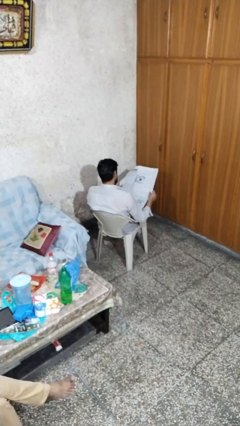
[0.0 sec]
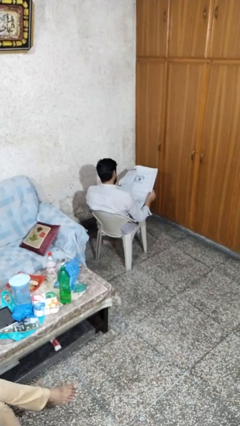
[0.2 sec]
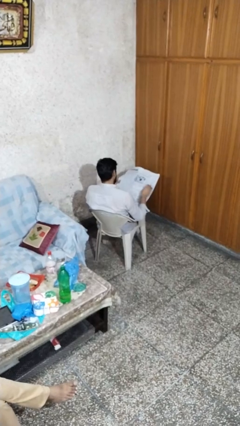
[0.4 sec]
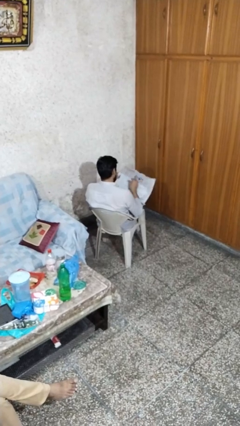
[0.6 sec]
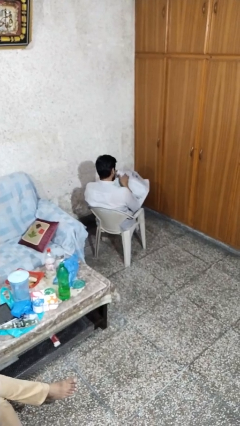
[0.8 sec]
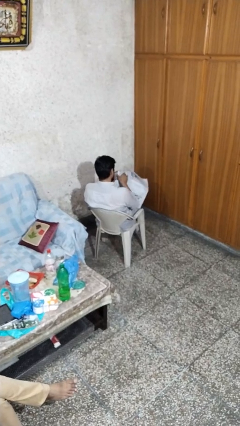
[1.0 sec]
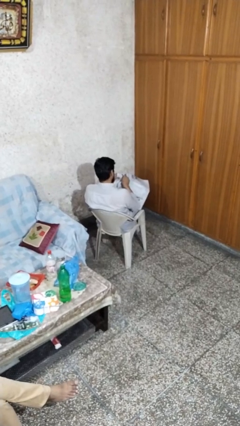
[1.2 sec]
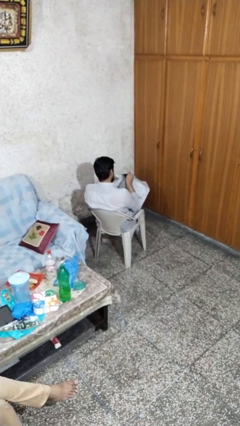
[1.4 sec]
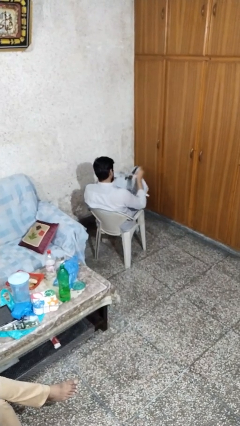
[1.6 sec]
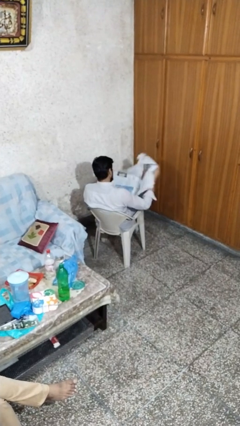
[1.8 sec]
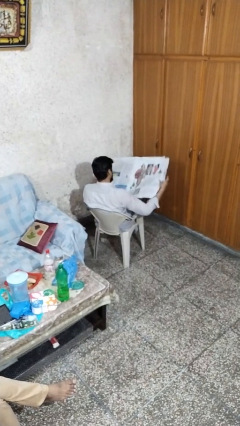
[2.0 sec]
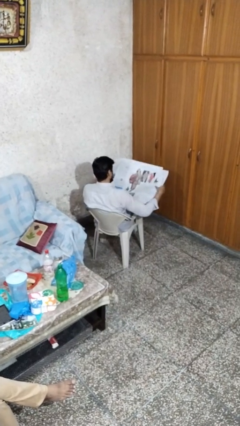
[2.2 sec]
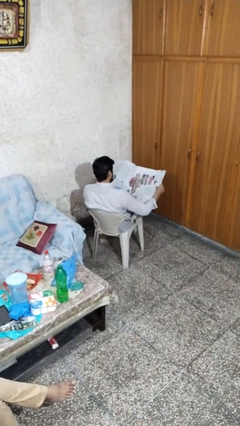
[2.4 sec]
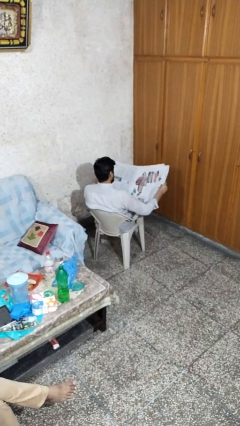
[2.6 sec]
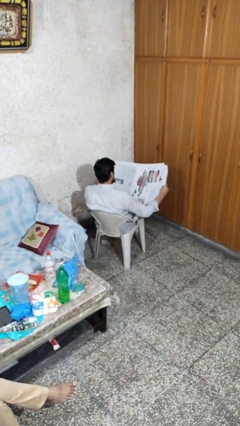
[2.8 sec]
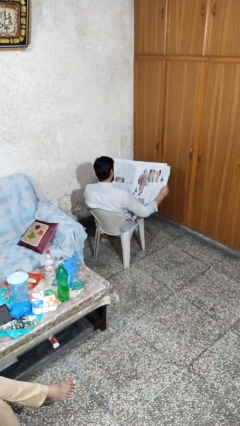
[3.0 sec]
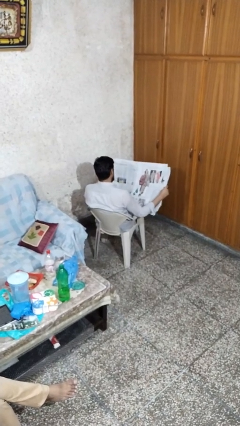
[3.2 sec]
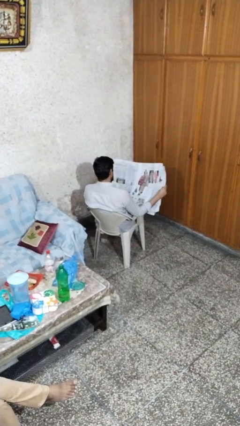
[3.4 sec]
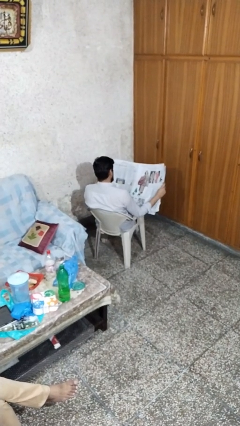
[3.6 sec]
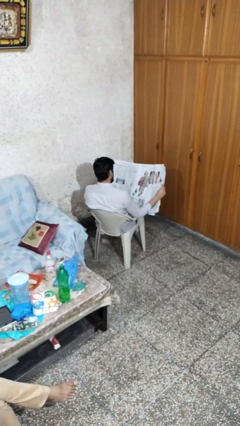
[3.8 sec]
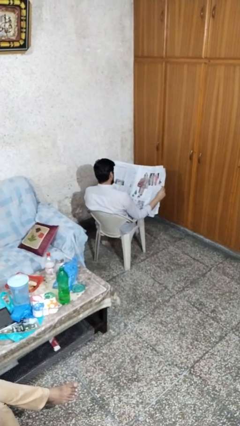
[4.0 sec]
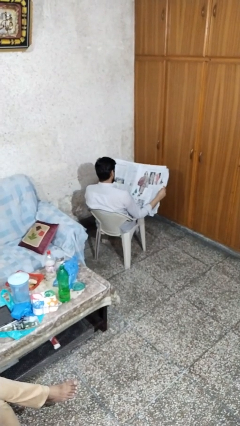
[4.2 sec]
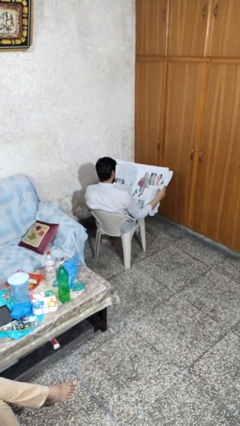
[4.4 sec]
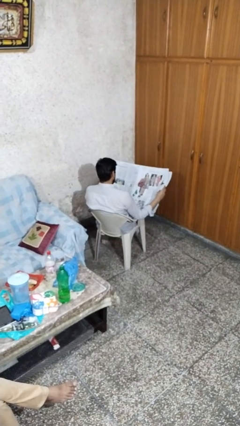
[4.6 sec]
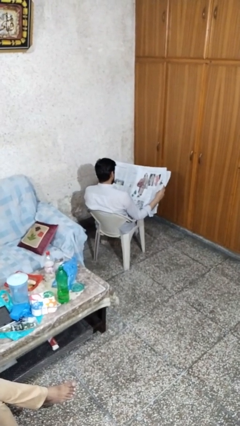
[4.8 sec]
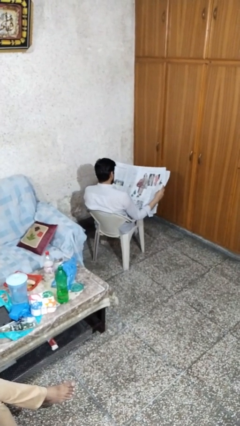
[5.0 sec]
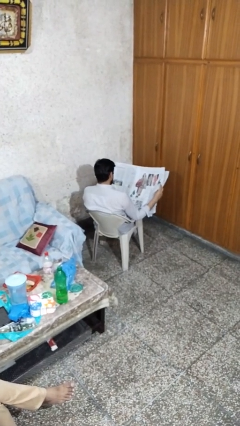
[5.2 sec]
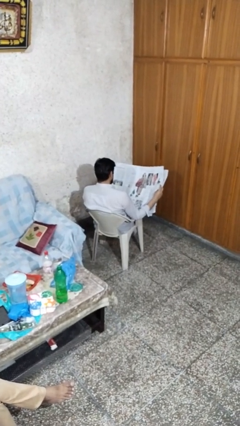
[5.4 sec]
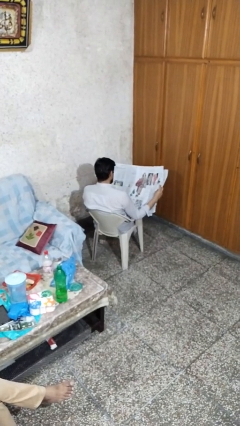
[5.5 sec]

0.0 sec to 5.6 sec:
person reads newspaper

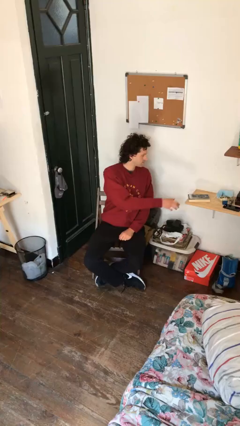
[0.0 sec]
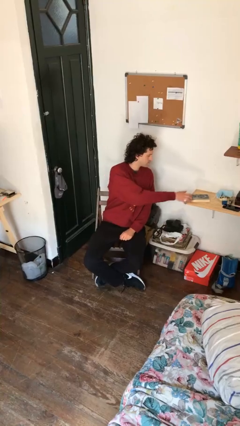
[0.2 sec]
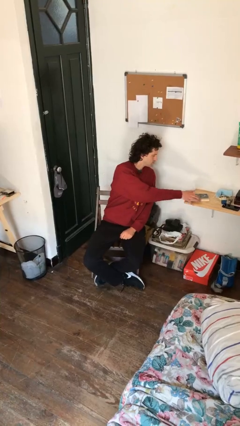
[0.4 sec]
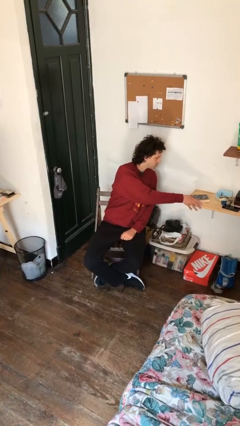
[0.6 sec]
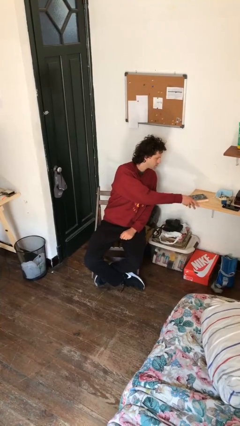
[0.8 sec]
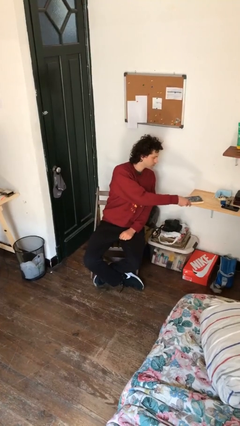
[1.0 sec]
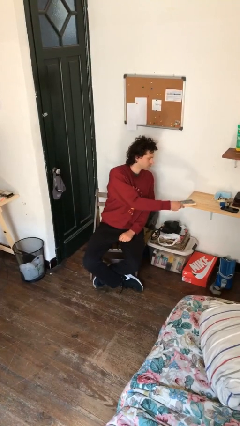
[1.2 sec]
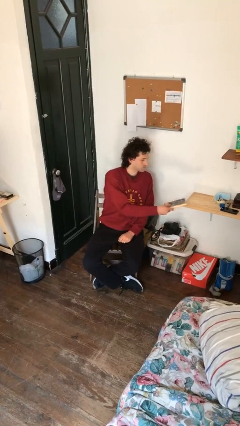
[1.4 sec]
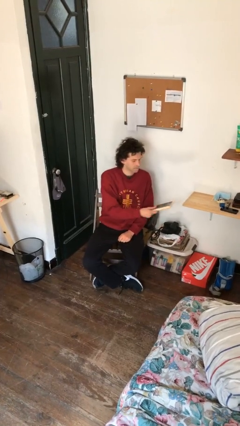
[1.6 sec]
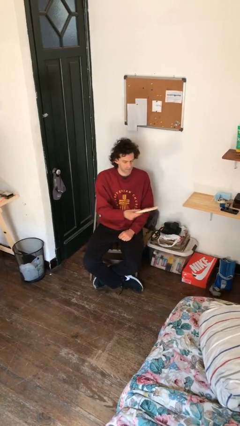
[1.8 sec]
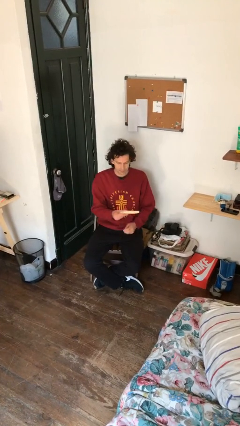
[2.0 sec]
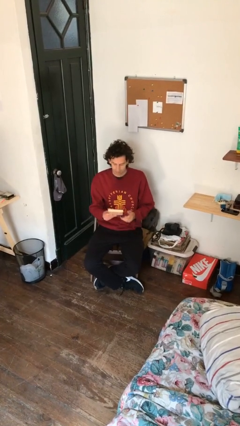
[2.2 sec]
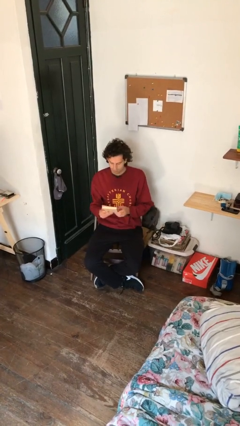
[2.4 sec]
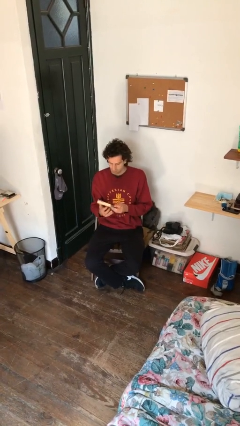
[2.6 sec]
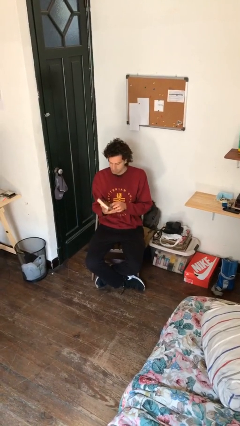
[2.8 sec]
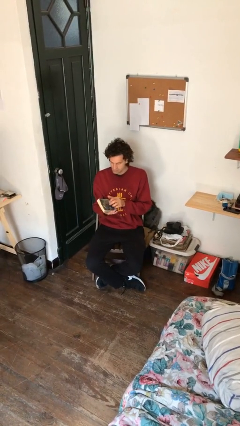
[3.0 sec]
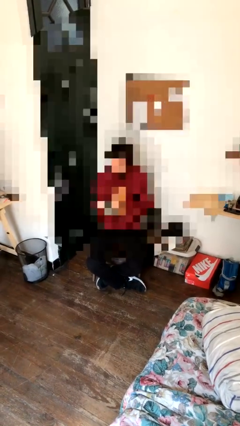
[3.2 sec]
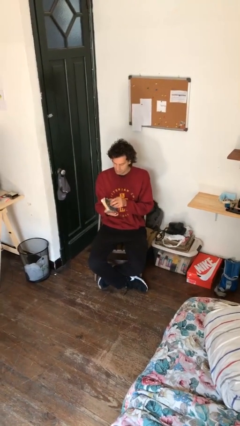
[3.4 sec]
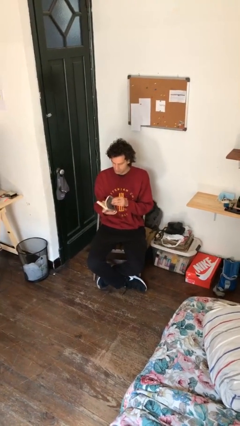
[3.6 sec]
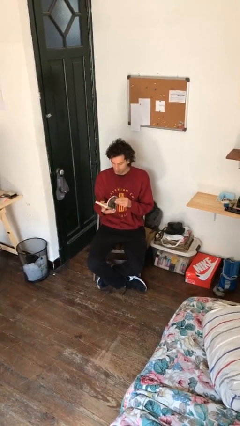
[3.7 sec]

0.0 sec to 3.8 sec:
person picks up object from table

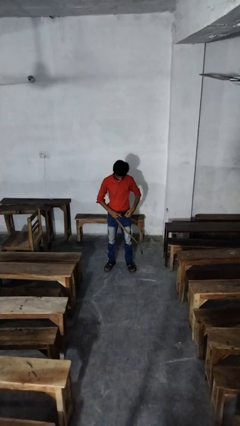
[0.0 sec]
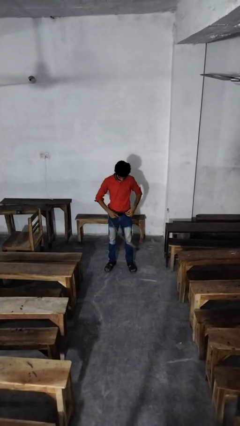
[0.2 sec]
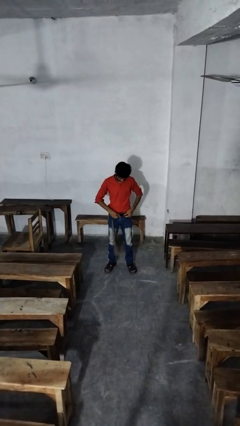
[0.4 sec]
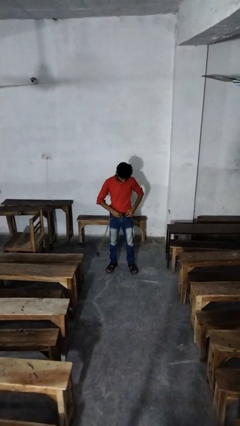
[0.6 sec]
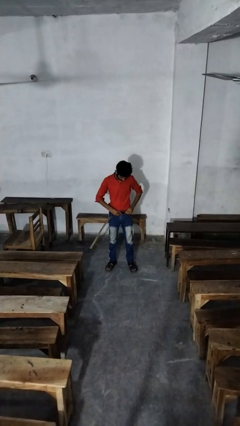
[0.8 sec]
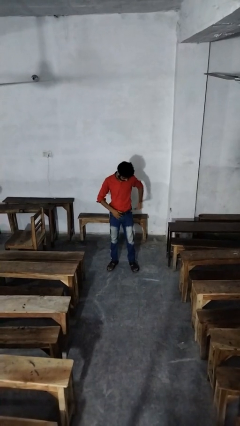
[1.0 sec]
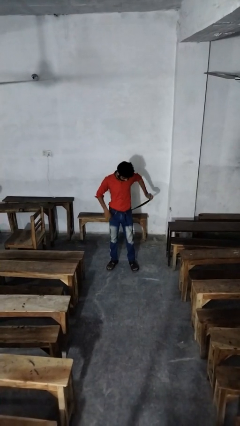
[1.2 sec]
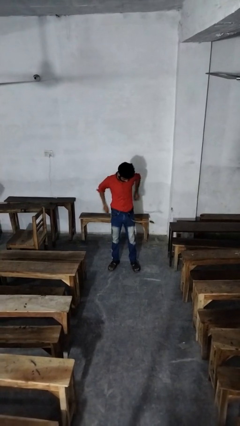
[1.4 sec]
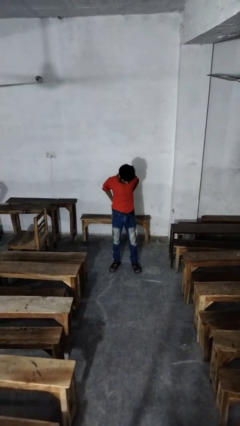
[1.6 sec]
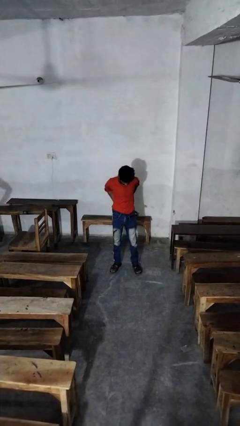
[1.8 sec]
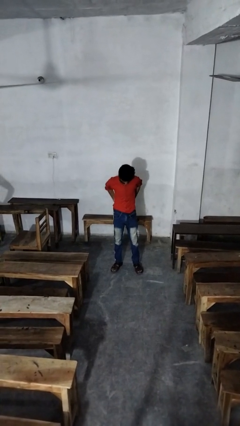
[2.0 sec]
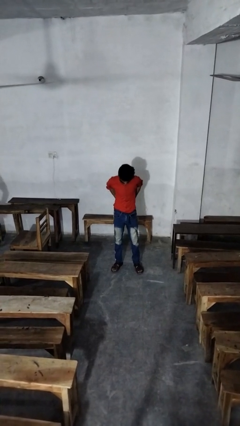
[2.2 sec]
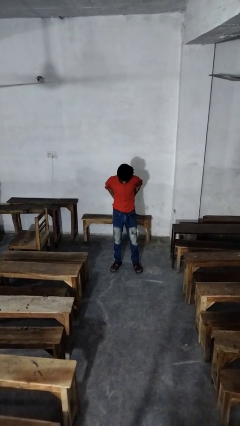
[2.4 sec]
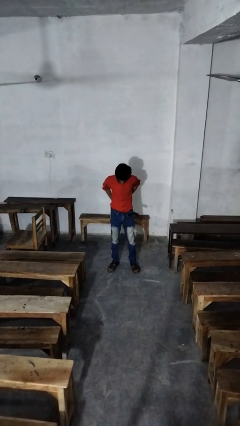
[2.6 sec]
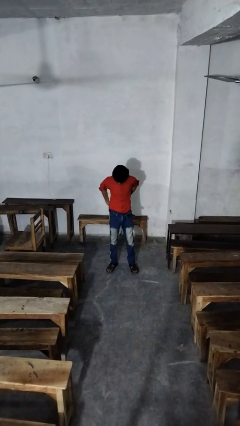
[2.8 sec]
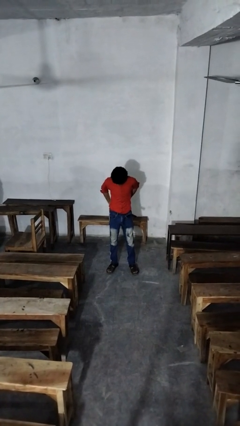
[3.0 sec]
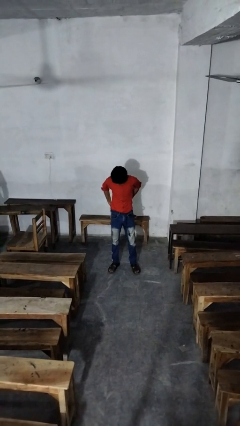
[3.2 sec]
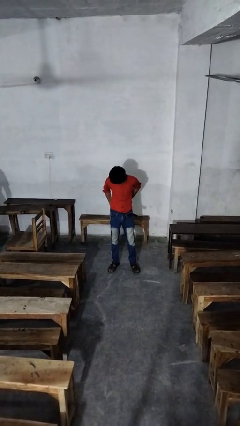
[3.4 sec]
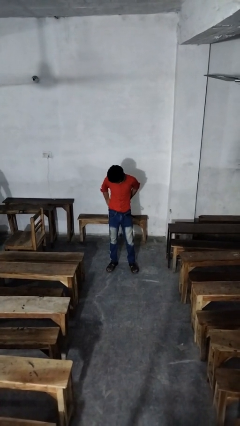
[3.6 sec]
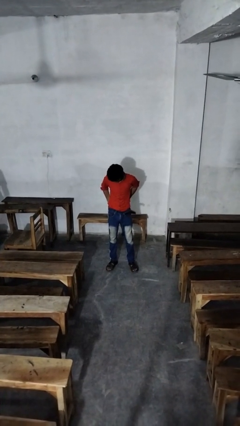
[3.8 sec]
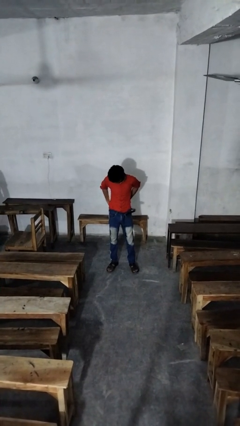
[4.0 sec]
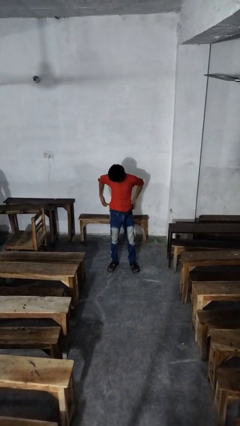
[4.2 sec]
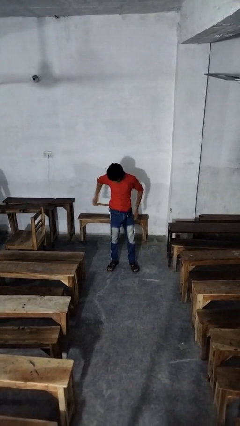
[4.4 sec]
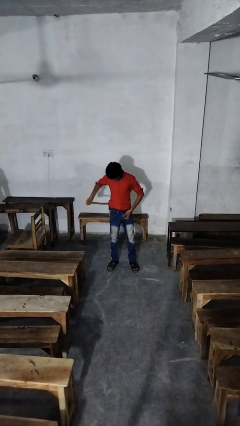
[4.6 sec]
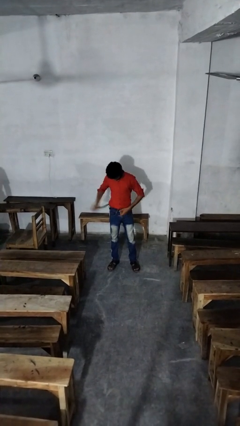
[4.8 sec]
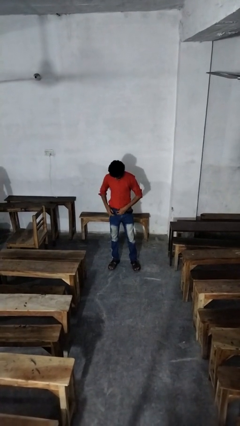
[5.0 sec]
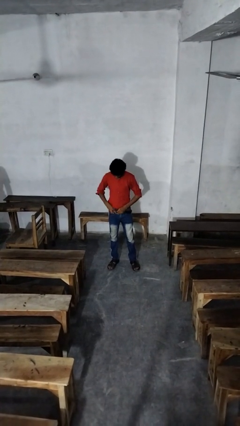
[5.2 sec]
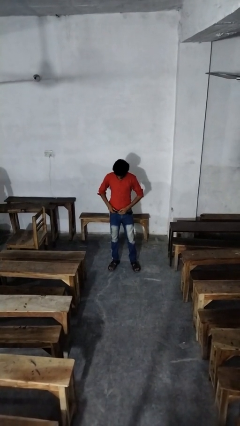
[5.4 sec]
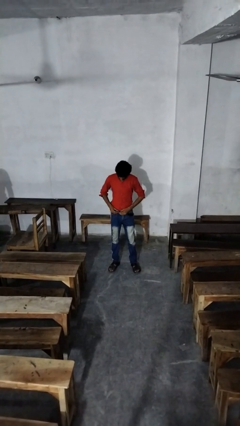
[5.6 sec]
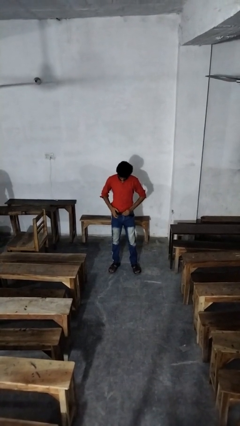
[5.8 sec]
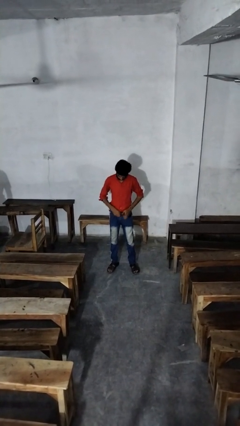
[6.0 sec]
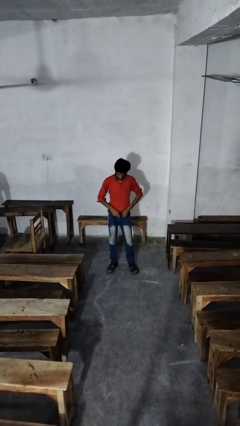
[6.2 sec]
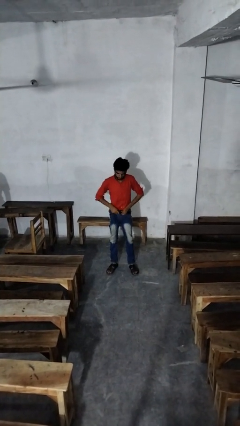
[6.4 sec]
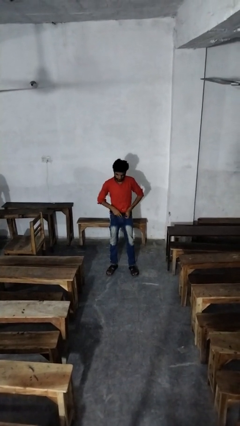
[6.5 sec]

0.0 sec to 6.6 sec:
person puts on belt

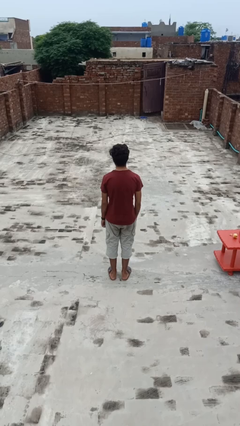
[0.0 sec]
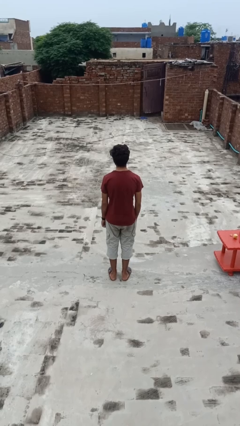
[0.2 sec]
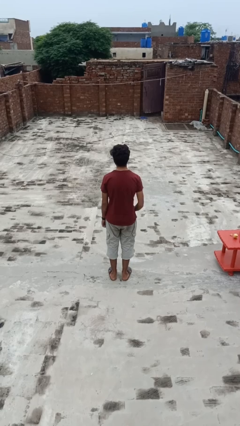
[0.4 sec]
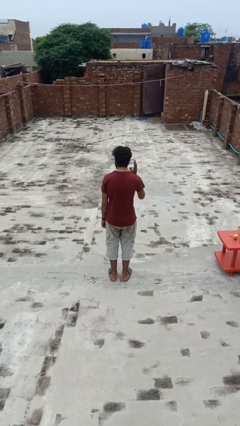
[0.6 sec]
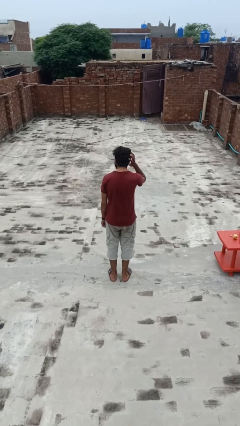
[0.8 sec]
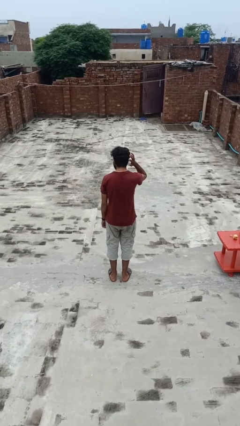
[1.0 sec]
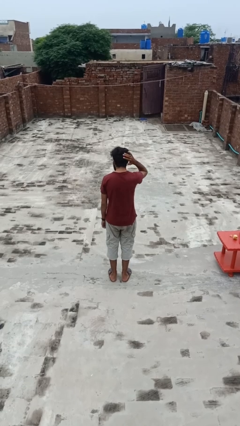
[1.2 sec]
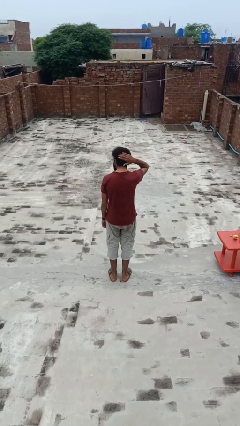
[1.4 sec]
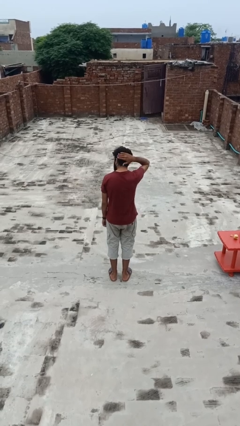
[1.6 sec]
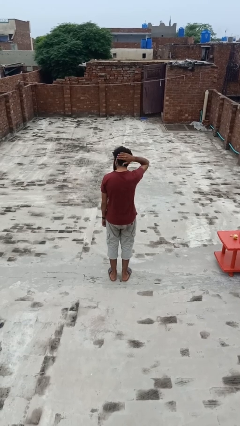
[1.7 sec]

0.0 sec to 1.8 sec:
person pats head
